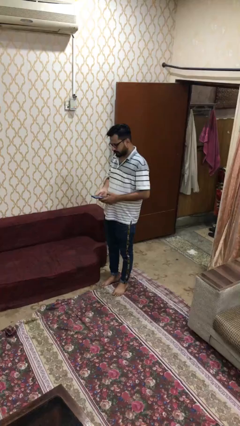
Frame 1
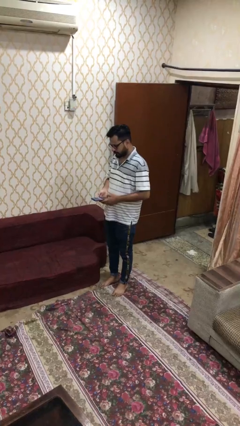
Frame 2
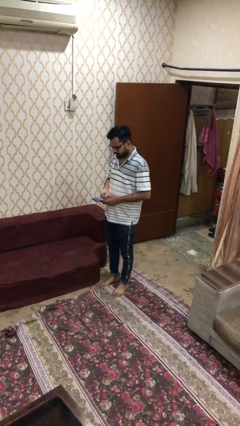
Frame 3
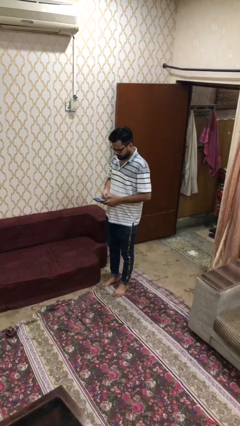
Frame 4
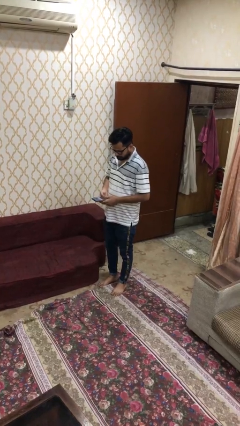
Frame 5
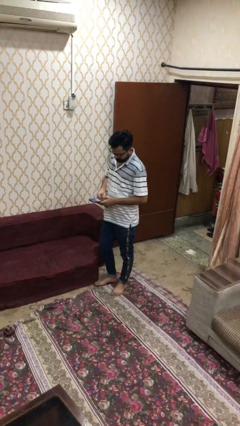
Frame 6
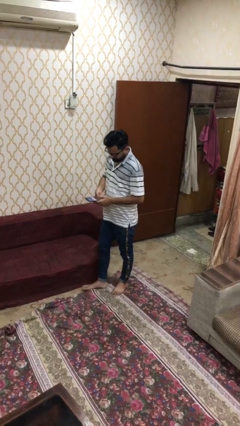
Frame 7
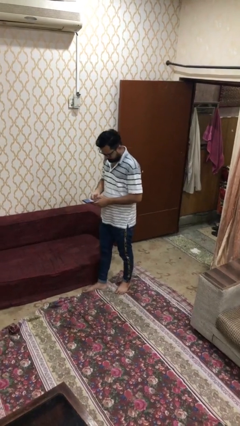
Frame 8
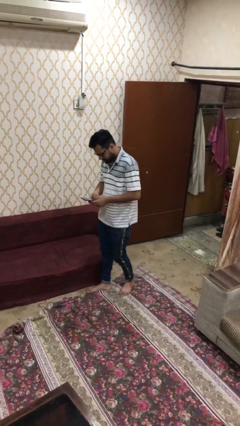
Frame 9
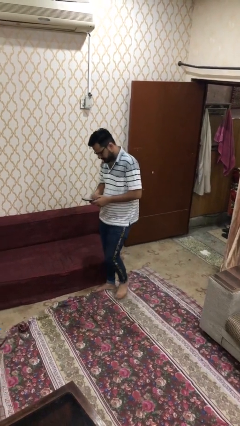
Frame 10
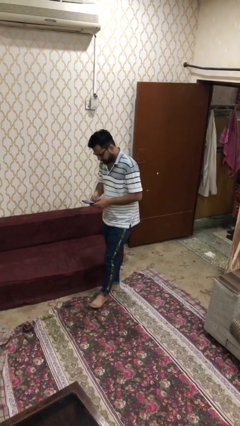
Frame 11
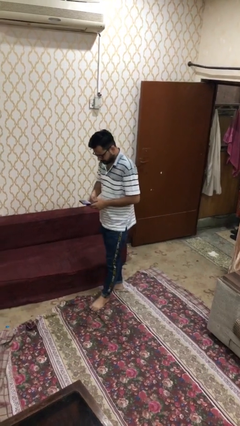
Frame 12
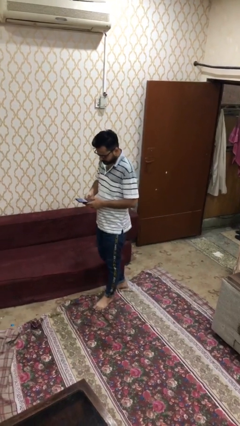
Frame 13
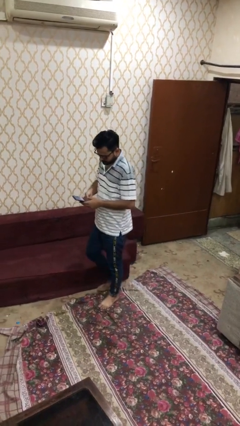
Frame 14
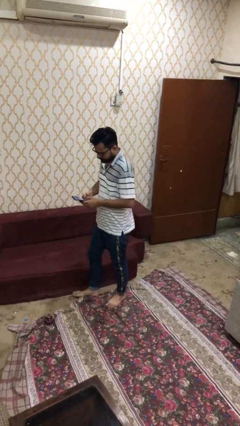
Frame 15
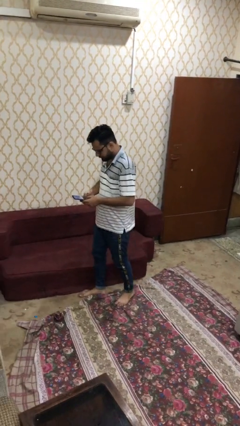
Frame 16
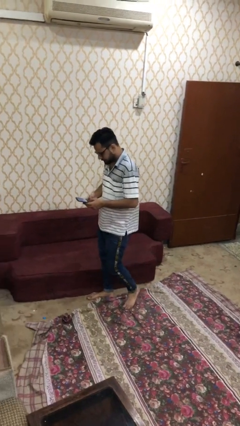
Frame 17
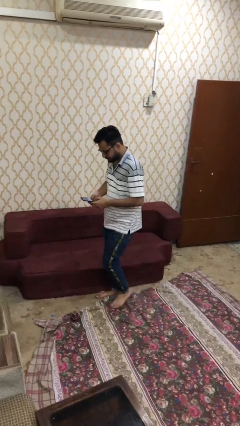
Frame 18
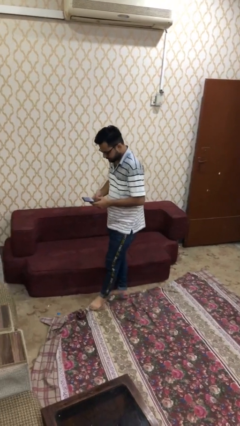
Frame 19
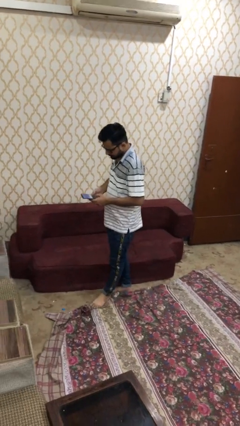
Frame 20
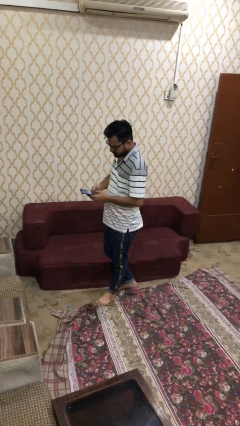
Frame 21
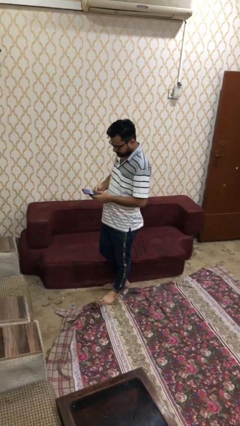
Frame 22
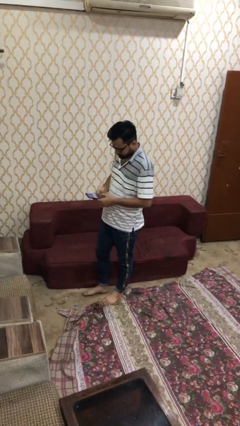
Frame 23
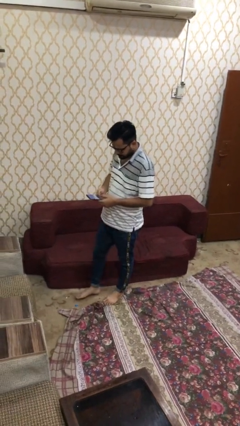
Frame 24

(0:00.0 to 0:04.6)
person texts on phone

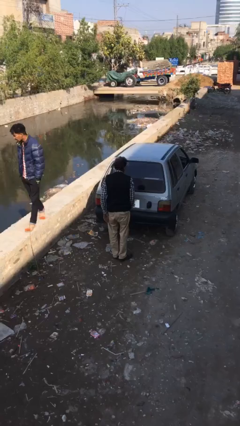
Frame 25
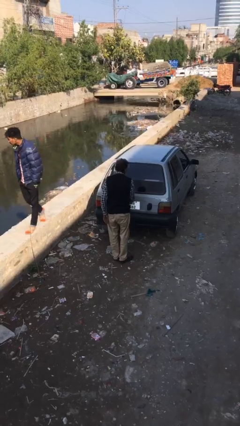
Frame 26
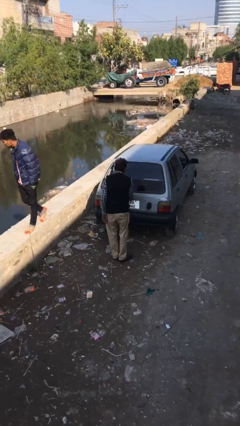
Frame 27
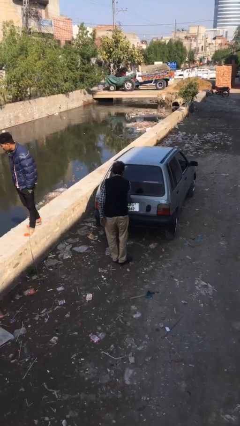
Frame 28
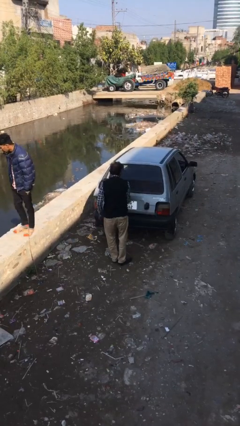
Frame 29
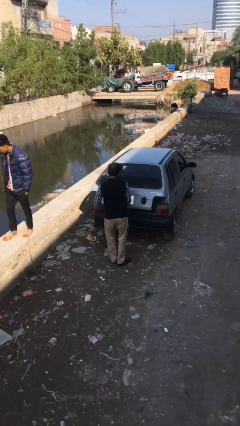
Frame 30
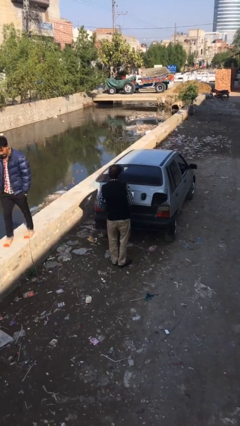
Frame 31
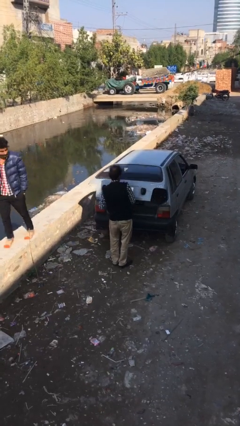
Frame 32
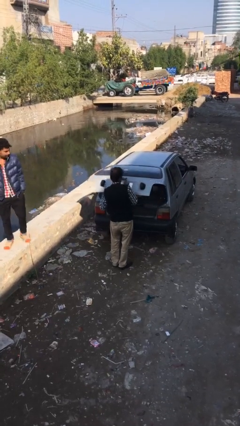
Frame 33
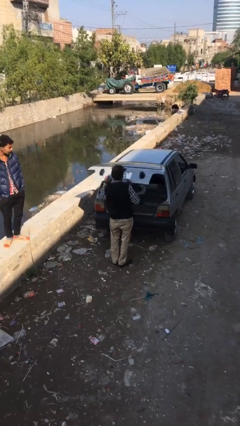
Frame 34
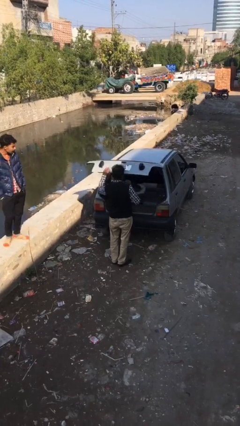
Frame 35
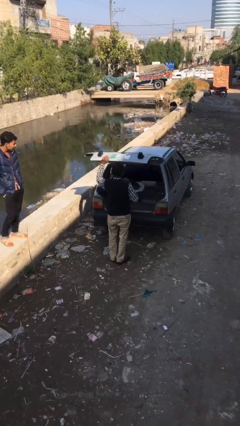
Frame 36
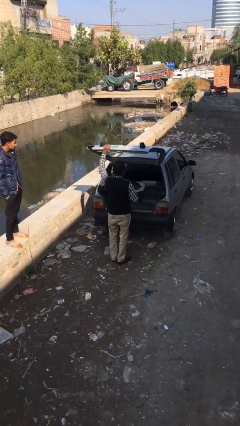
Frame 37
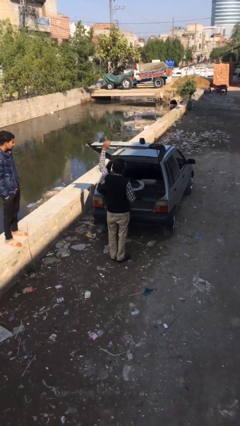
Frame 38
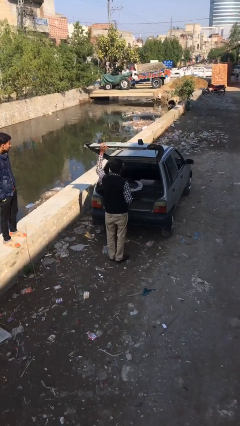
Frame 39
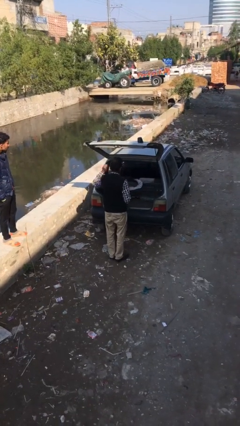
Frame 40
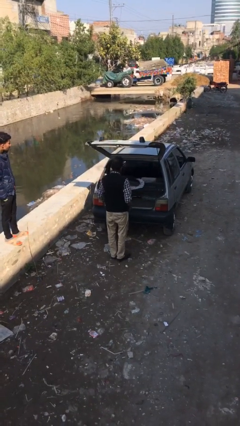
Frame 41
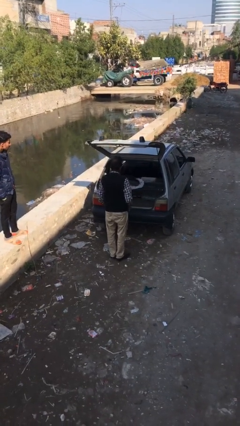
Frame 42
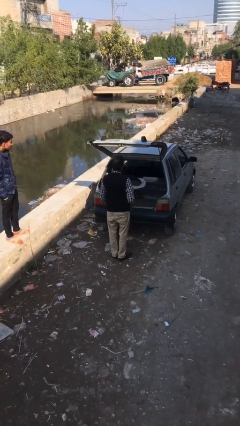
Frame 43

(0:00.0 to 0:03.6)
person opens car trunk

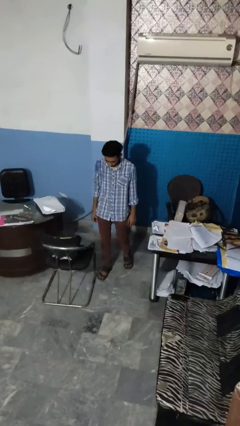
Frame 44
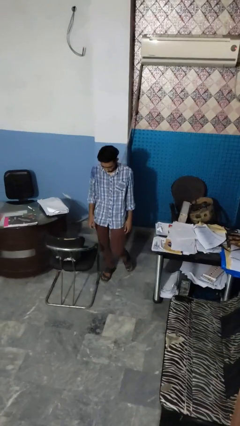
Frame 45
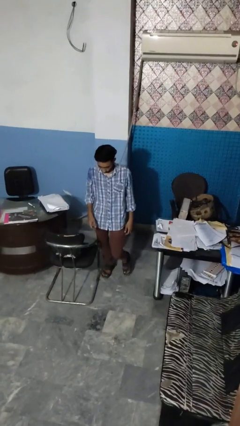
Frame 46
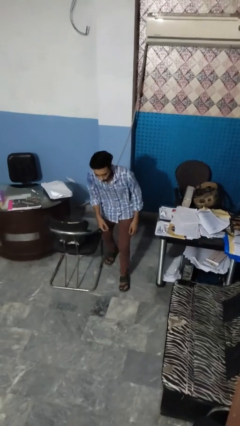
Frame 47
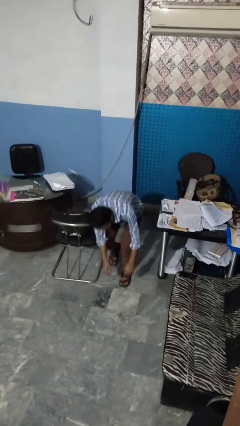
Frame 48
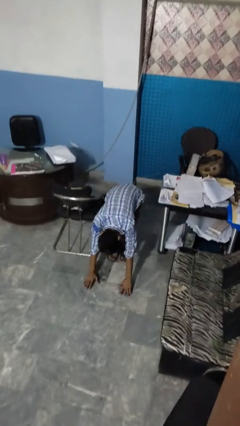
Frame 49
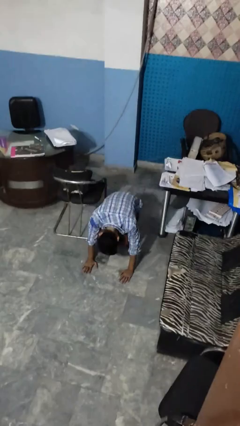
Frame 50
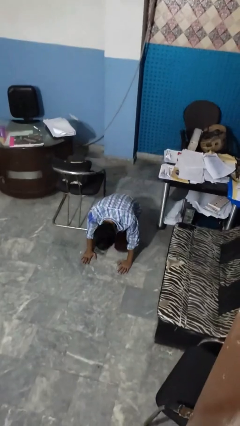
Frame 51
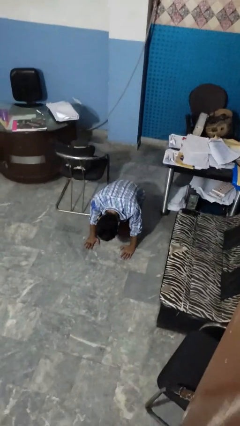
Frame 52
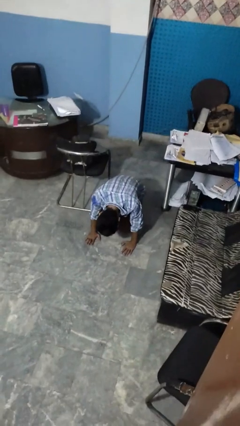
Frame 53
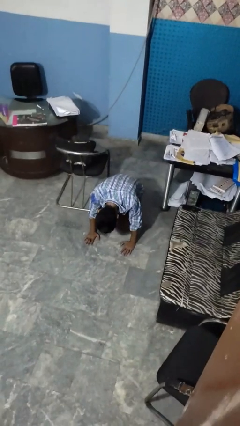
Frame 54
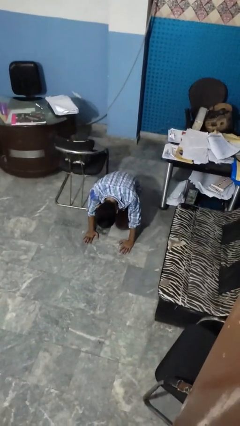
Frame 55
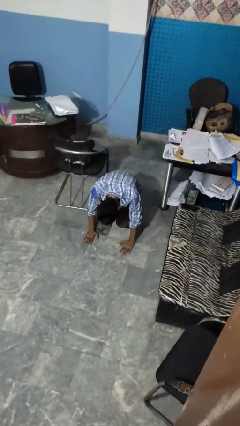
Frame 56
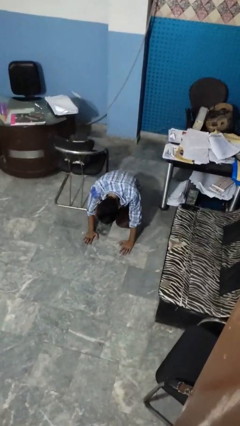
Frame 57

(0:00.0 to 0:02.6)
person trips on object on floor

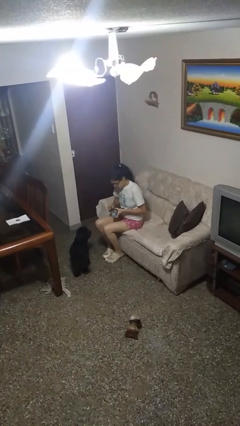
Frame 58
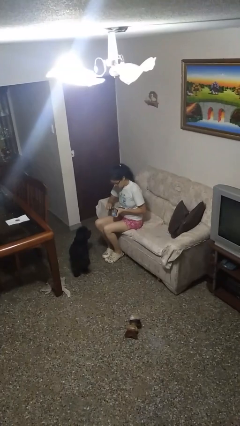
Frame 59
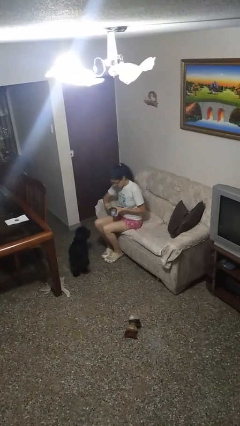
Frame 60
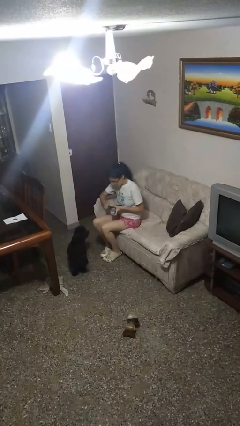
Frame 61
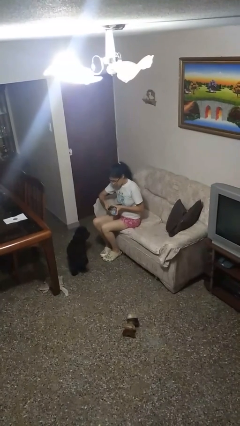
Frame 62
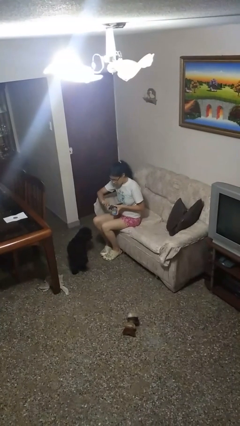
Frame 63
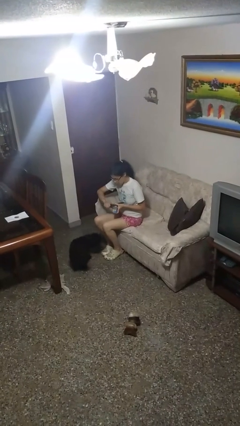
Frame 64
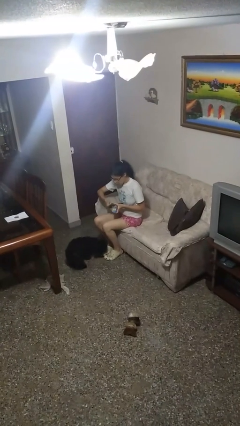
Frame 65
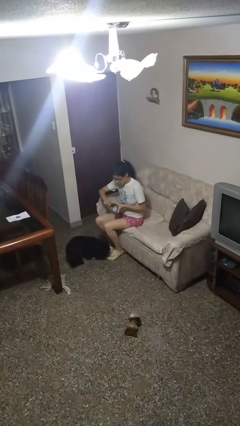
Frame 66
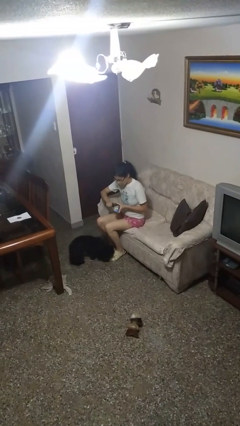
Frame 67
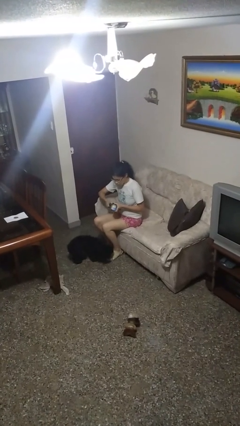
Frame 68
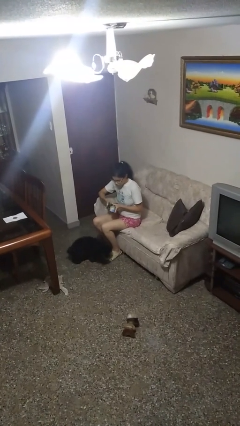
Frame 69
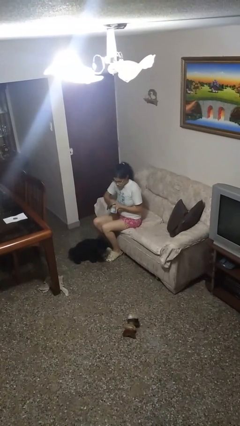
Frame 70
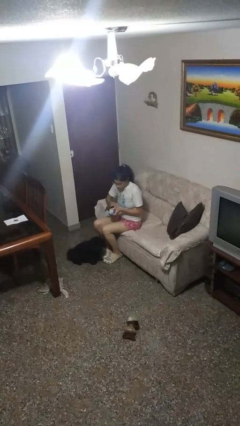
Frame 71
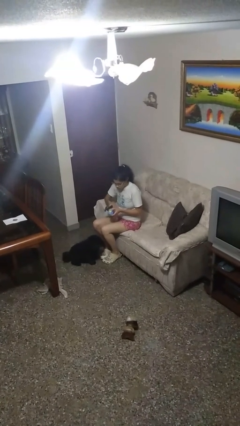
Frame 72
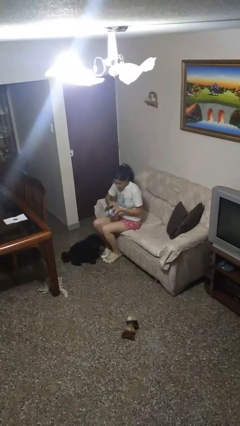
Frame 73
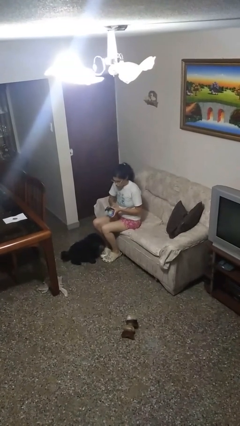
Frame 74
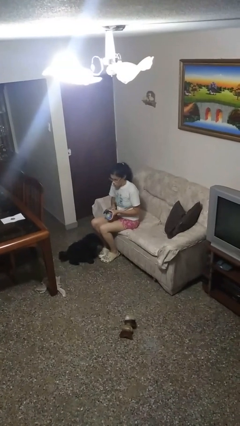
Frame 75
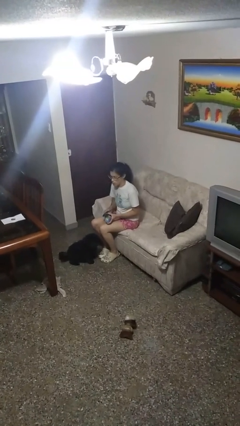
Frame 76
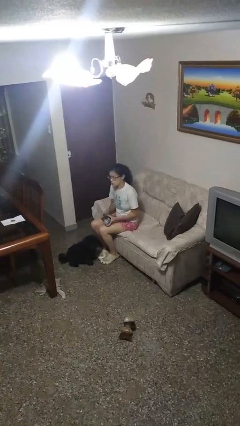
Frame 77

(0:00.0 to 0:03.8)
person opens can with can opener

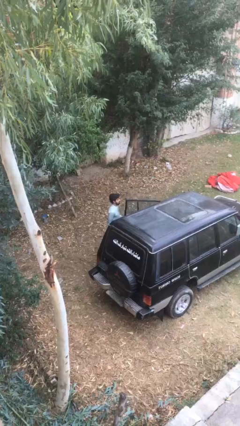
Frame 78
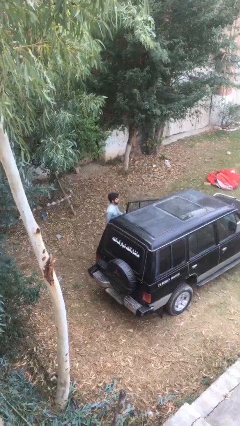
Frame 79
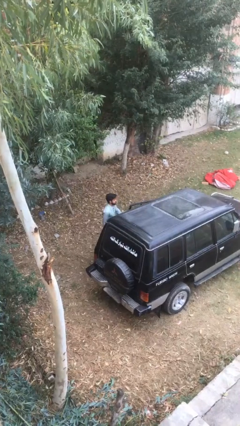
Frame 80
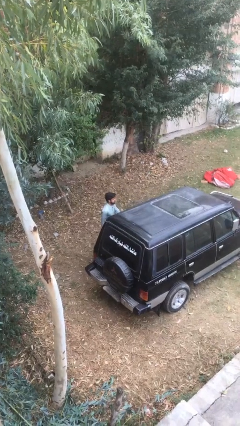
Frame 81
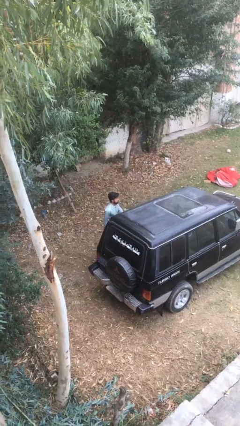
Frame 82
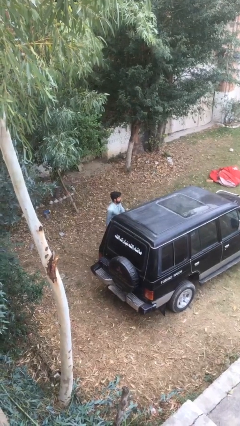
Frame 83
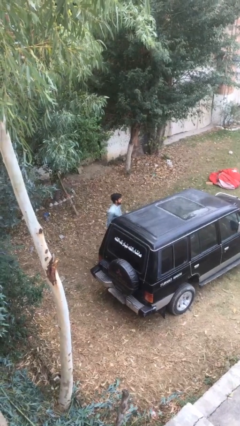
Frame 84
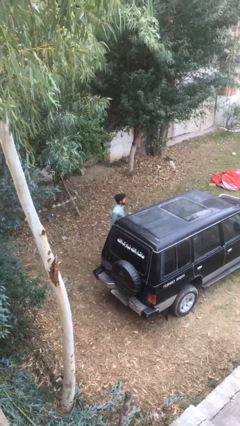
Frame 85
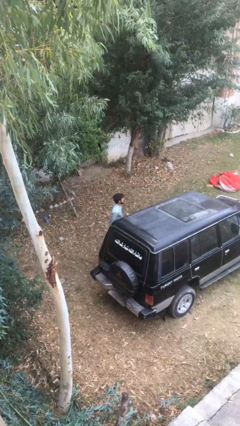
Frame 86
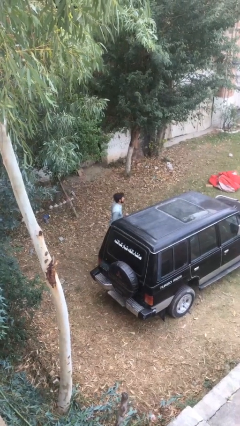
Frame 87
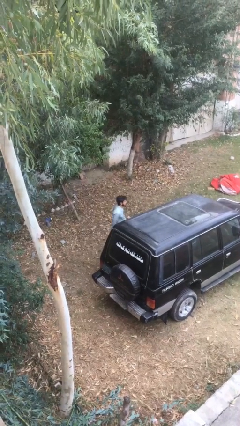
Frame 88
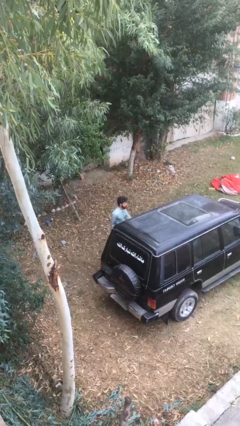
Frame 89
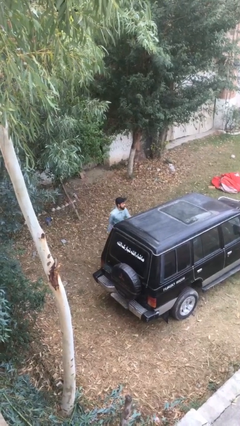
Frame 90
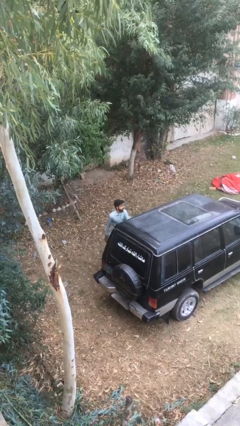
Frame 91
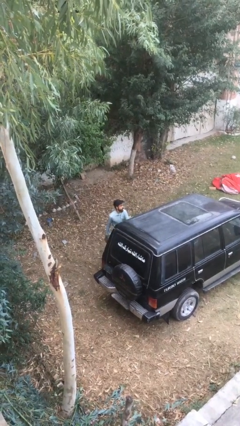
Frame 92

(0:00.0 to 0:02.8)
person closes car door

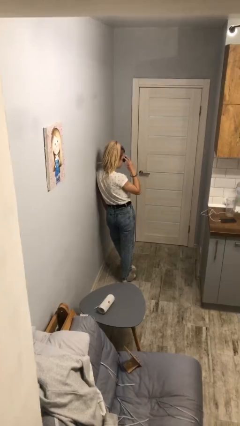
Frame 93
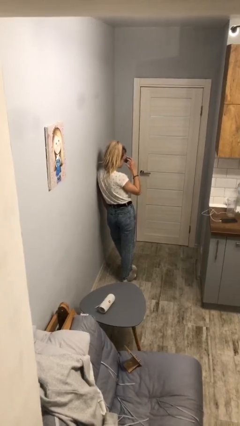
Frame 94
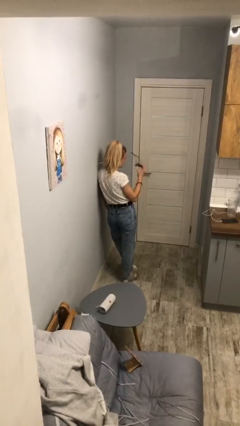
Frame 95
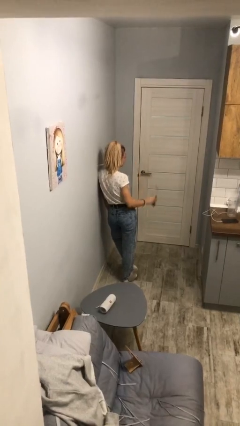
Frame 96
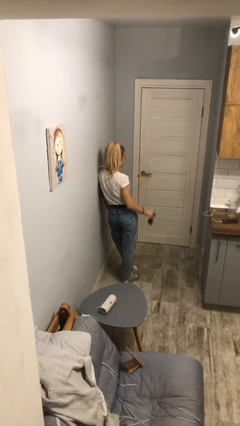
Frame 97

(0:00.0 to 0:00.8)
person takes off glasses
